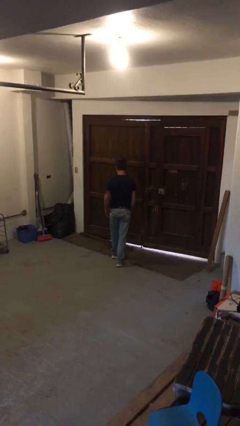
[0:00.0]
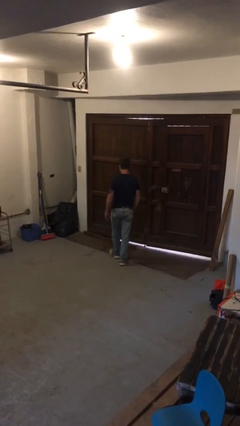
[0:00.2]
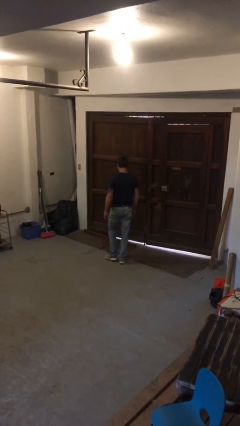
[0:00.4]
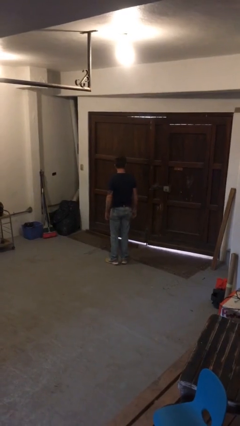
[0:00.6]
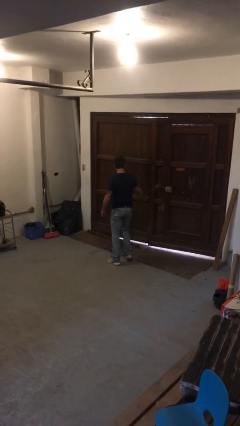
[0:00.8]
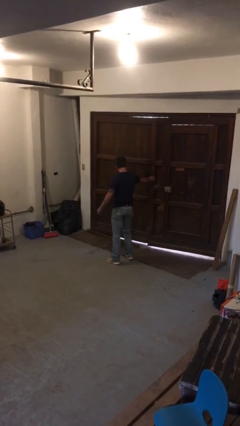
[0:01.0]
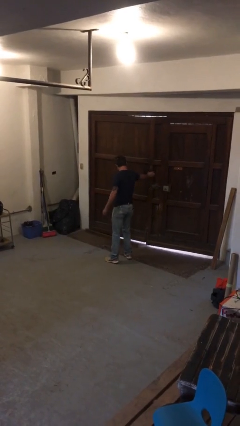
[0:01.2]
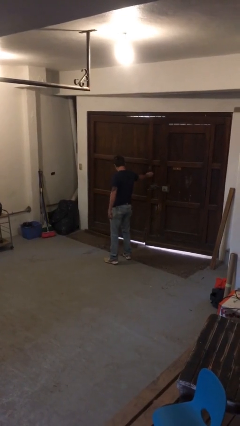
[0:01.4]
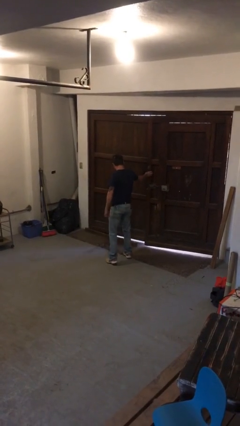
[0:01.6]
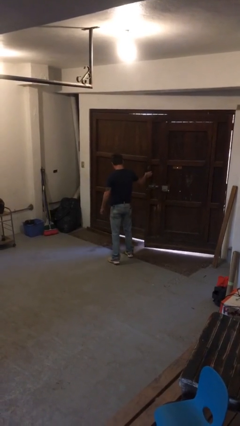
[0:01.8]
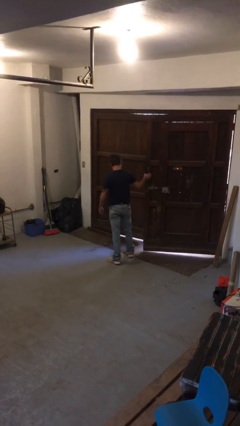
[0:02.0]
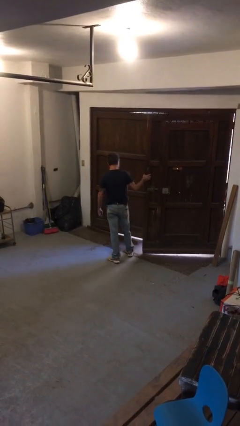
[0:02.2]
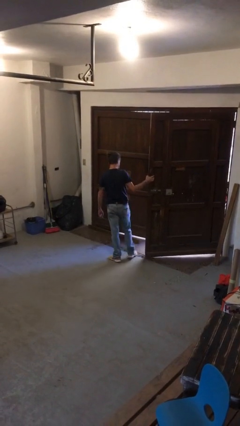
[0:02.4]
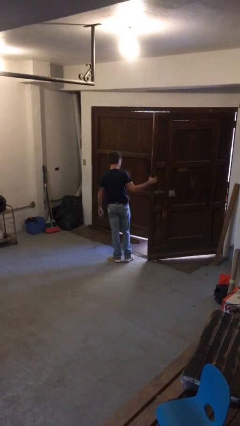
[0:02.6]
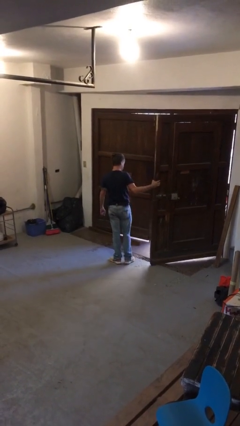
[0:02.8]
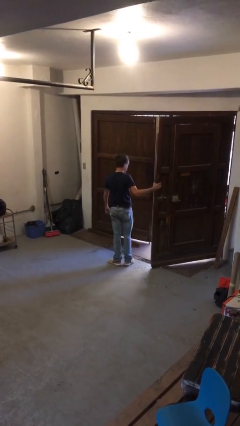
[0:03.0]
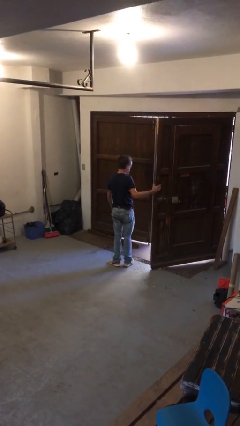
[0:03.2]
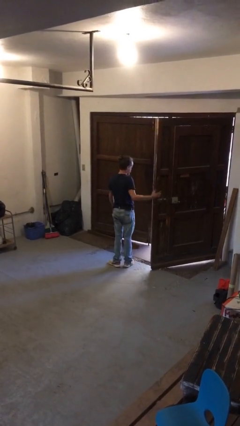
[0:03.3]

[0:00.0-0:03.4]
person opens gate

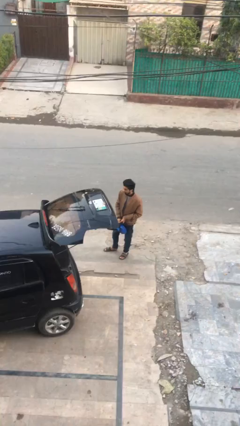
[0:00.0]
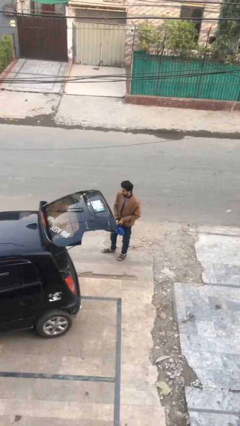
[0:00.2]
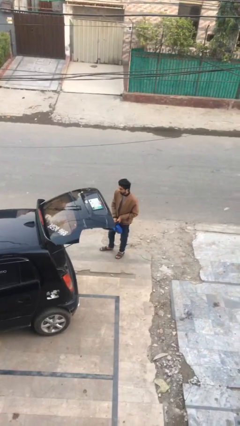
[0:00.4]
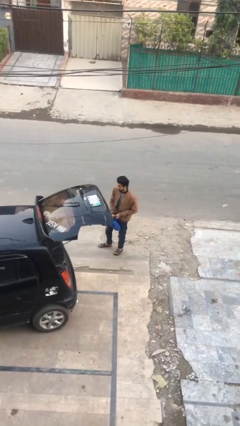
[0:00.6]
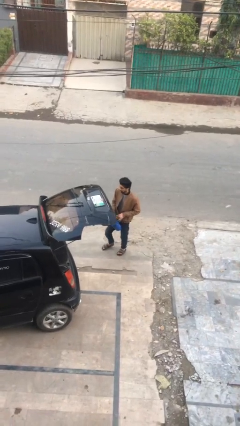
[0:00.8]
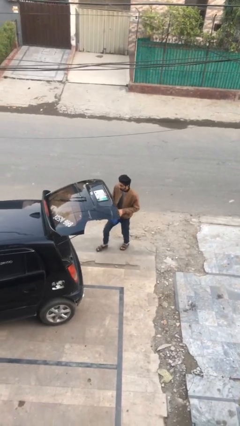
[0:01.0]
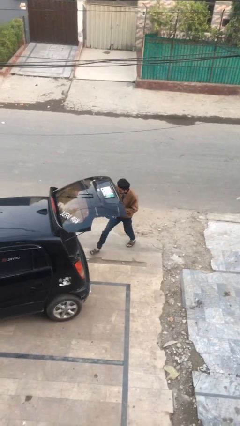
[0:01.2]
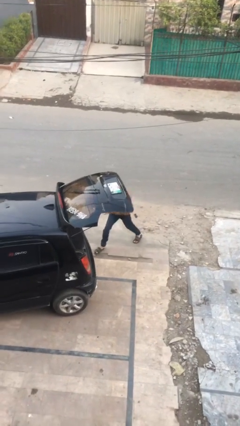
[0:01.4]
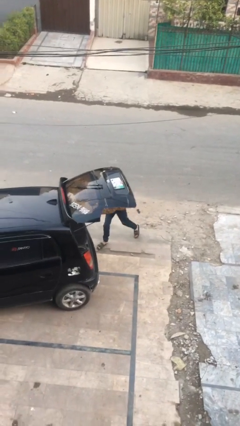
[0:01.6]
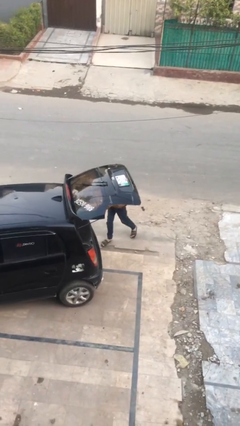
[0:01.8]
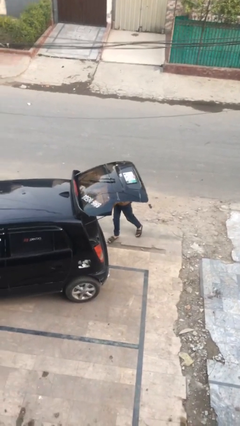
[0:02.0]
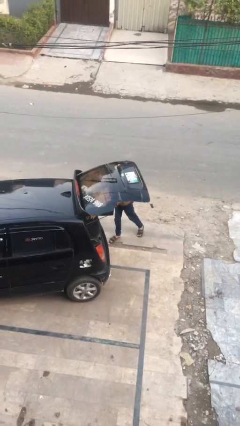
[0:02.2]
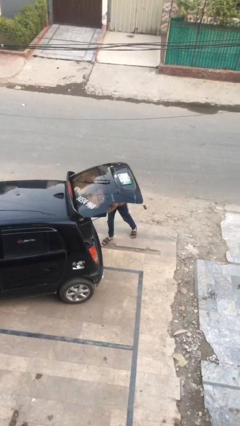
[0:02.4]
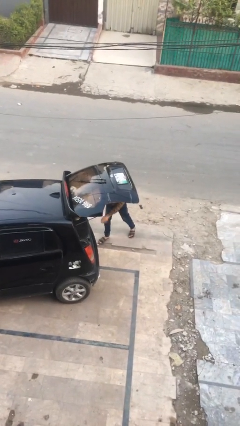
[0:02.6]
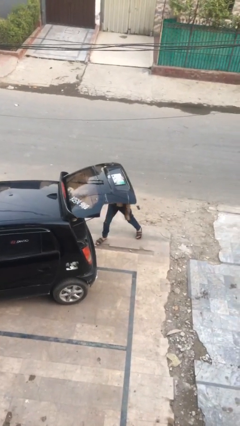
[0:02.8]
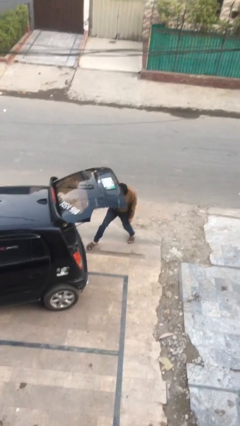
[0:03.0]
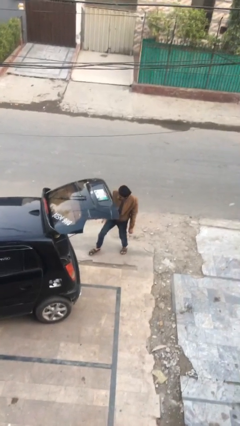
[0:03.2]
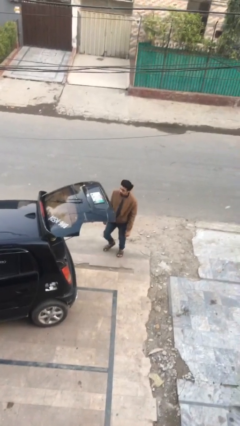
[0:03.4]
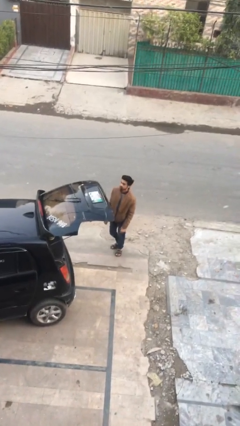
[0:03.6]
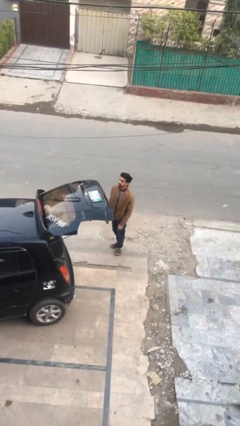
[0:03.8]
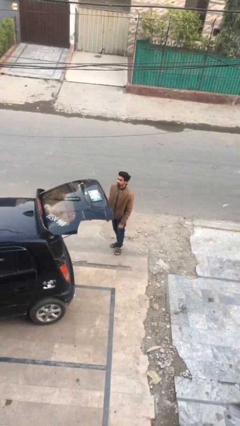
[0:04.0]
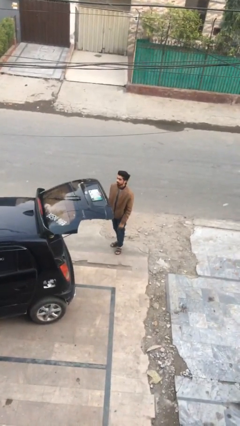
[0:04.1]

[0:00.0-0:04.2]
person loads car

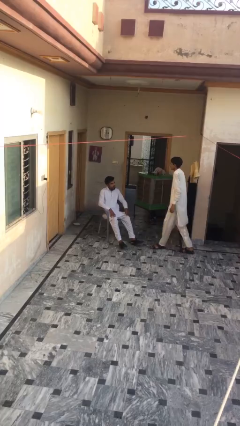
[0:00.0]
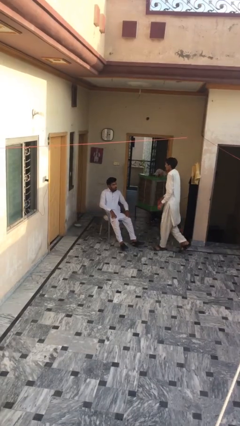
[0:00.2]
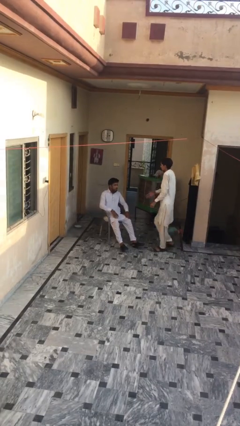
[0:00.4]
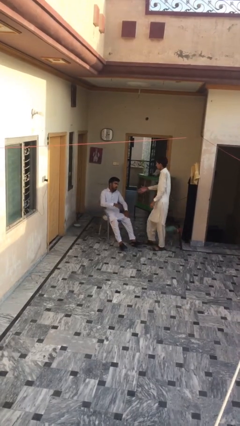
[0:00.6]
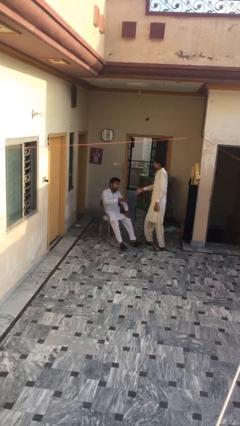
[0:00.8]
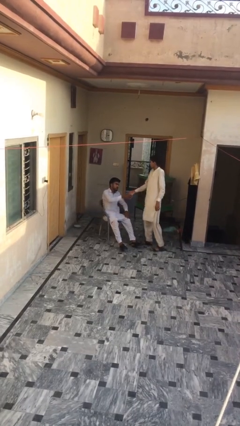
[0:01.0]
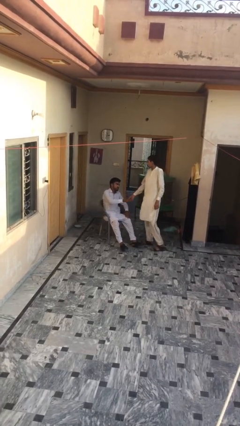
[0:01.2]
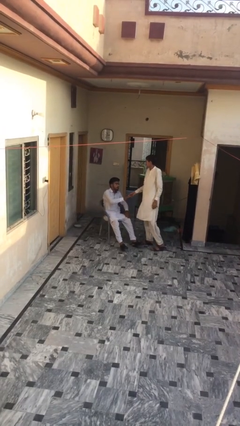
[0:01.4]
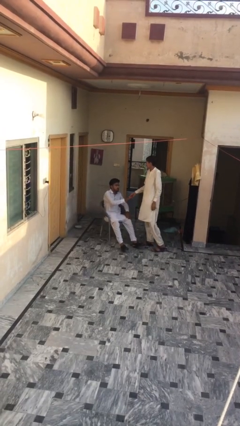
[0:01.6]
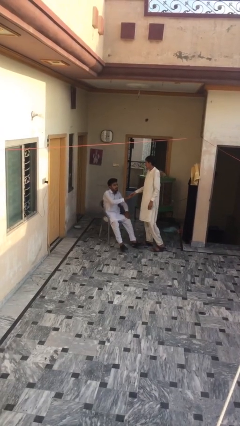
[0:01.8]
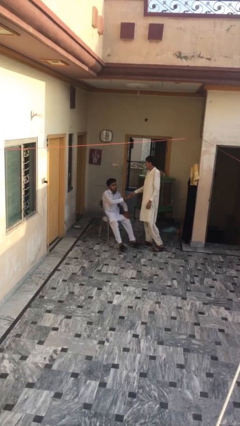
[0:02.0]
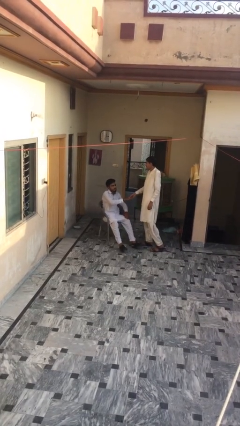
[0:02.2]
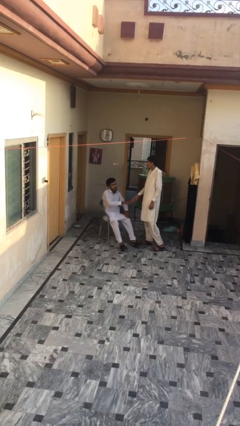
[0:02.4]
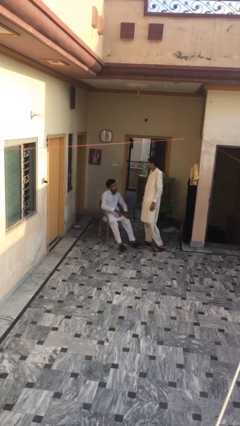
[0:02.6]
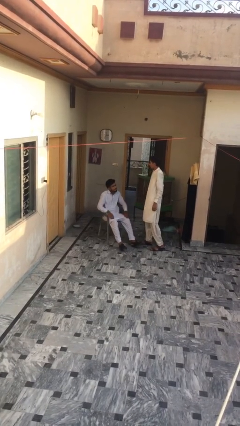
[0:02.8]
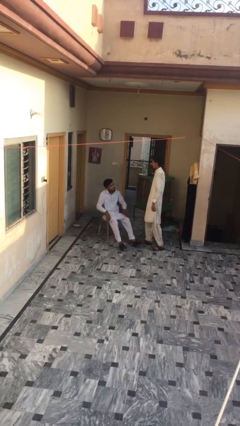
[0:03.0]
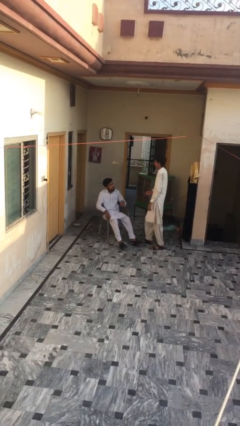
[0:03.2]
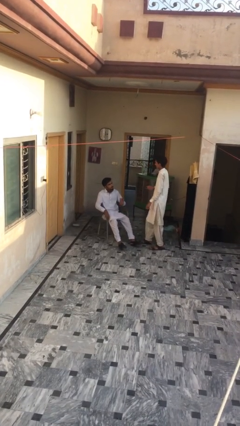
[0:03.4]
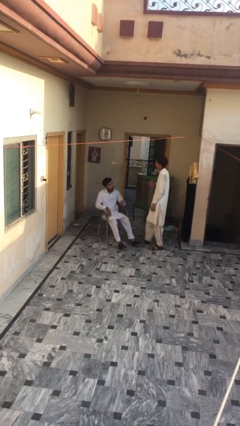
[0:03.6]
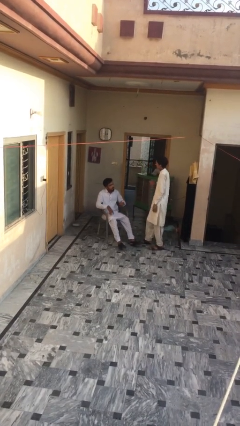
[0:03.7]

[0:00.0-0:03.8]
person shakes hand

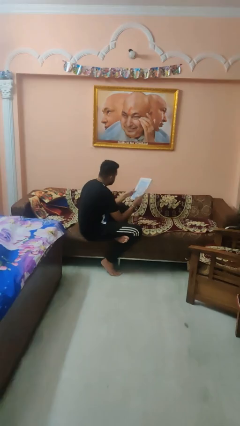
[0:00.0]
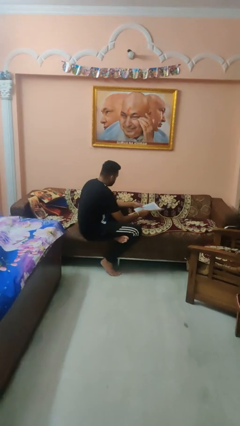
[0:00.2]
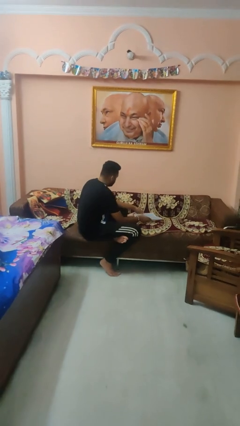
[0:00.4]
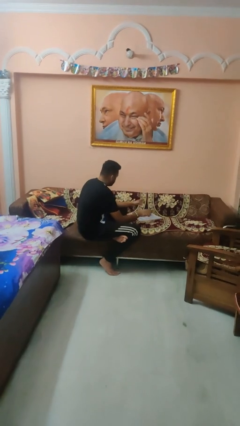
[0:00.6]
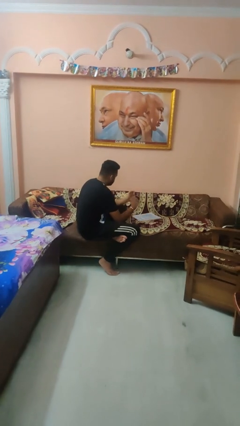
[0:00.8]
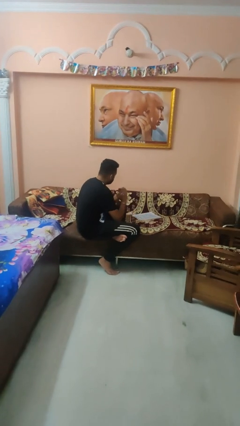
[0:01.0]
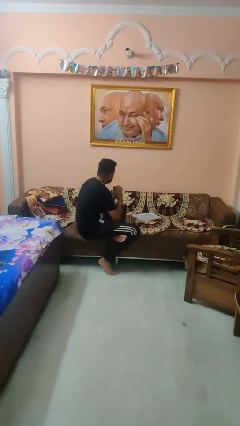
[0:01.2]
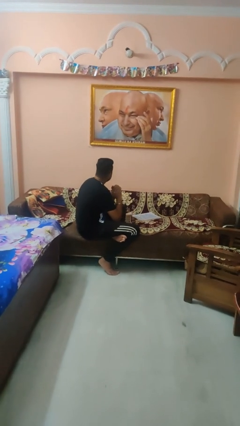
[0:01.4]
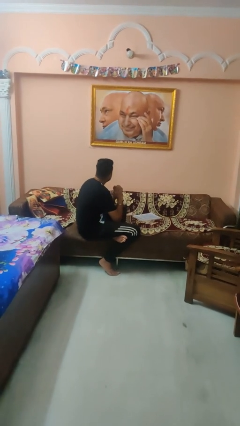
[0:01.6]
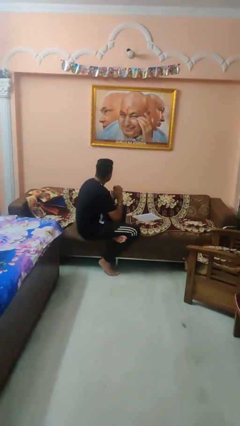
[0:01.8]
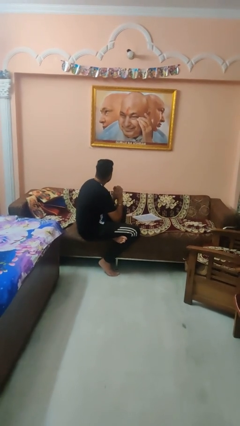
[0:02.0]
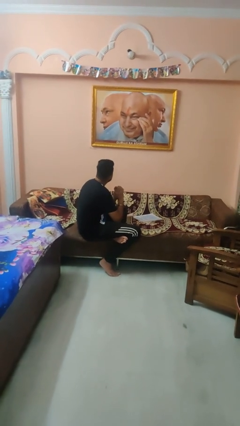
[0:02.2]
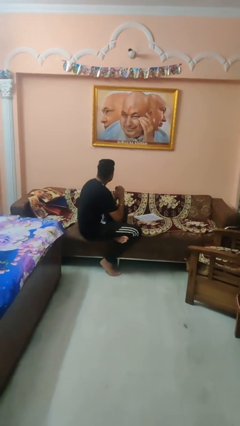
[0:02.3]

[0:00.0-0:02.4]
person puts down object on couch

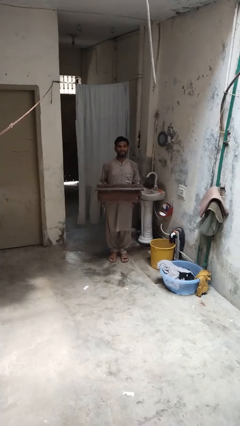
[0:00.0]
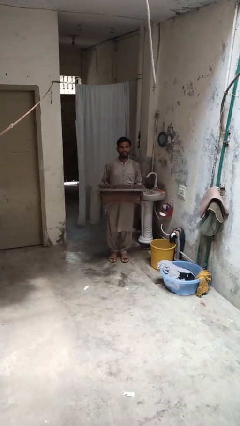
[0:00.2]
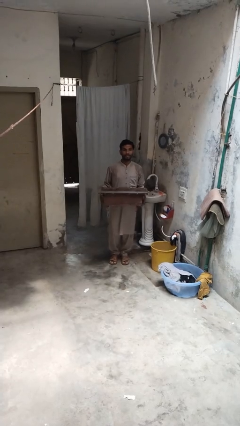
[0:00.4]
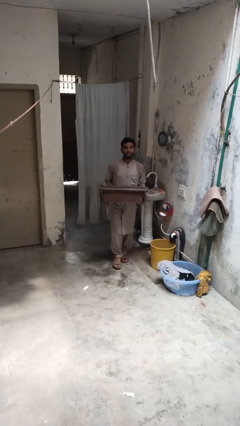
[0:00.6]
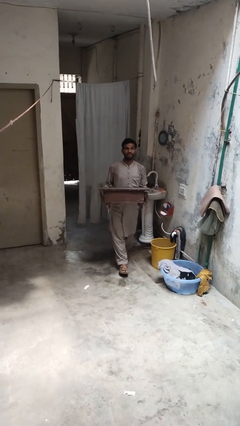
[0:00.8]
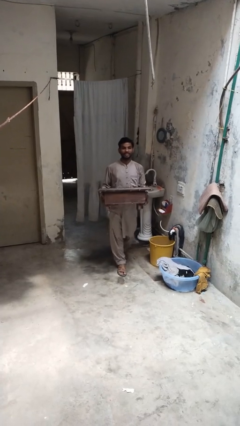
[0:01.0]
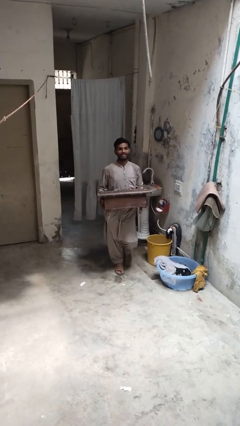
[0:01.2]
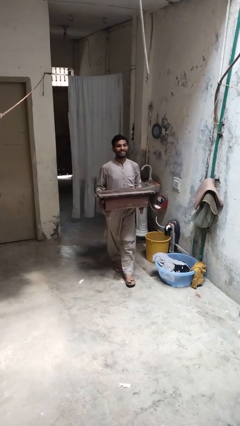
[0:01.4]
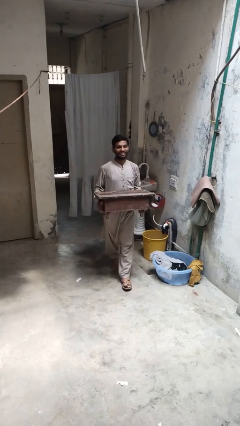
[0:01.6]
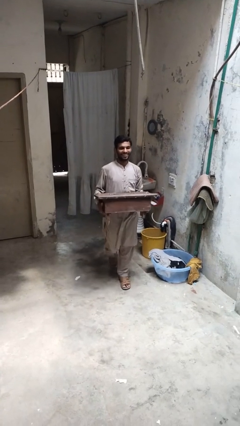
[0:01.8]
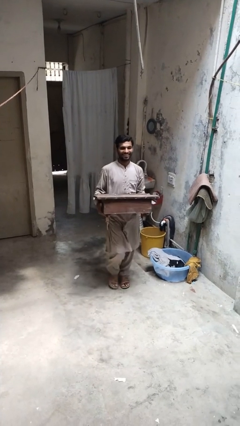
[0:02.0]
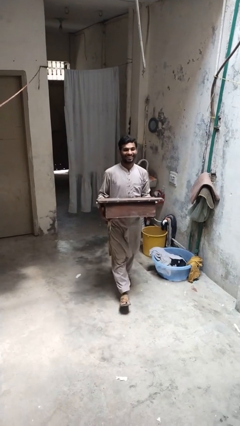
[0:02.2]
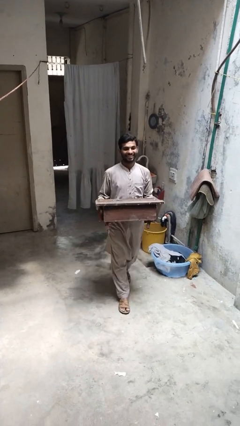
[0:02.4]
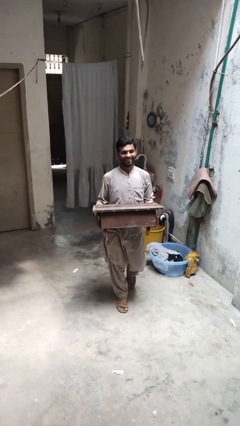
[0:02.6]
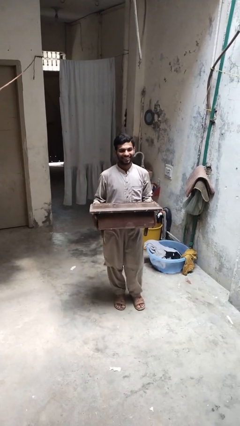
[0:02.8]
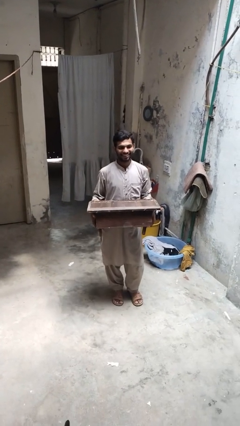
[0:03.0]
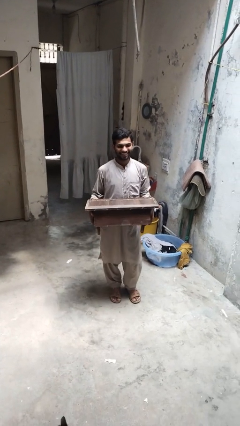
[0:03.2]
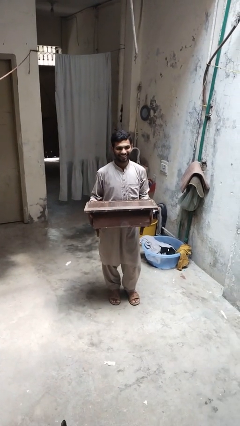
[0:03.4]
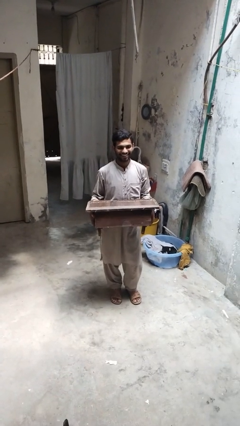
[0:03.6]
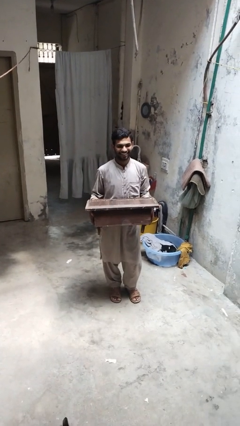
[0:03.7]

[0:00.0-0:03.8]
person carries furniture
